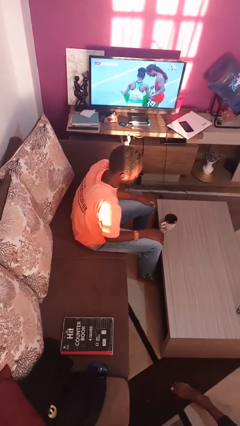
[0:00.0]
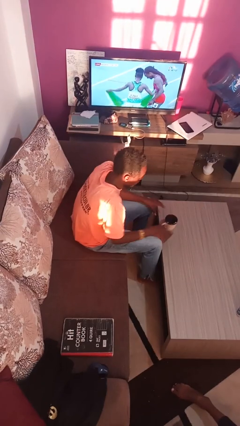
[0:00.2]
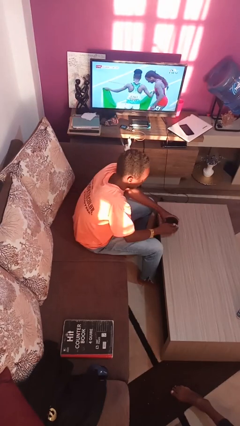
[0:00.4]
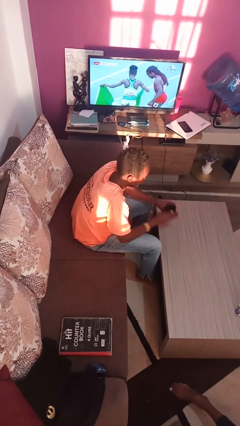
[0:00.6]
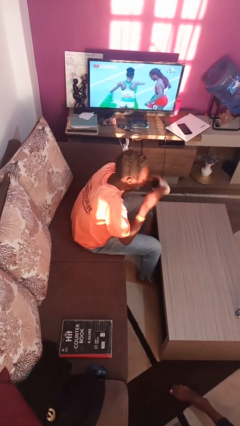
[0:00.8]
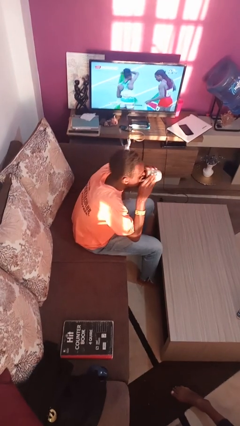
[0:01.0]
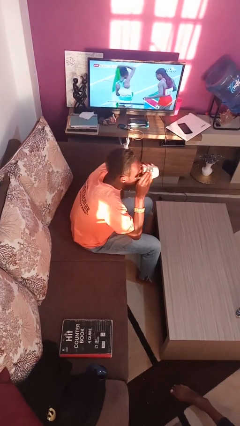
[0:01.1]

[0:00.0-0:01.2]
person drinks from mug

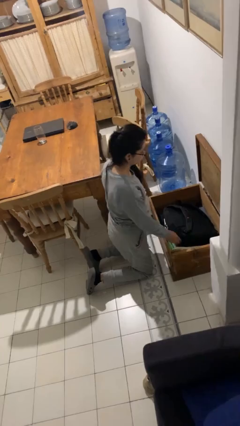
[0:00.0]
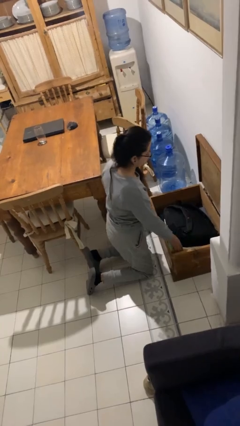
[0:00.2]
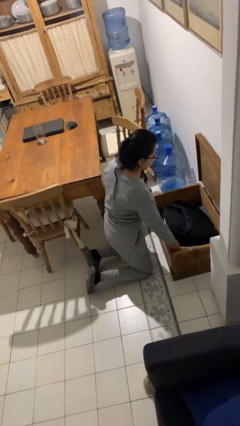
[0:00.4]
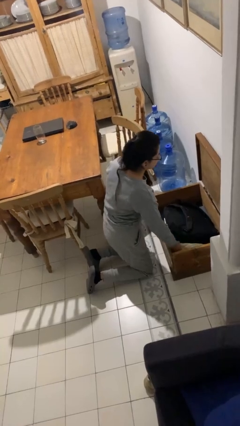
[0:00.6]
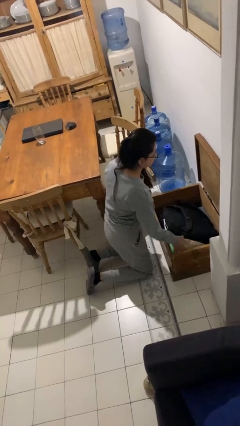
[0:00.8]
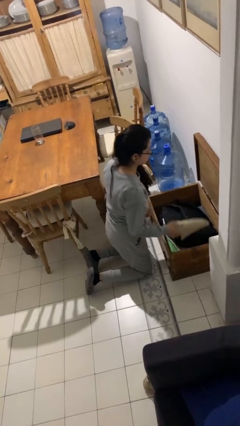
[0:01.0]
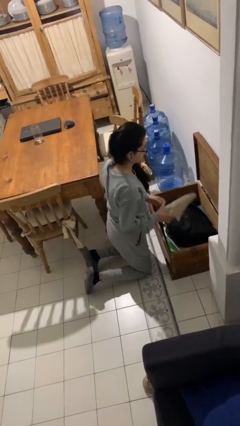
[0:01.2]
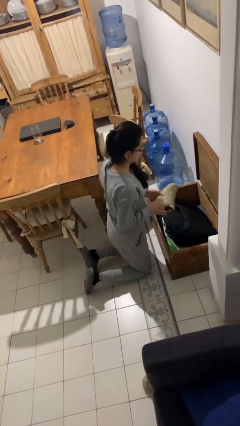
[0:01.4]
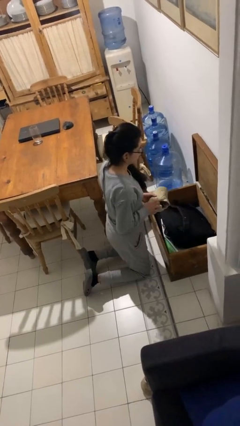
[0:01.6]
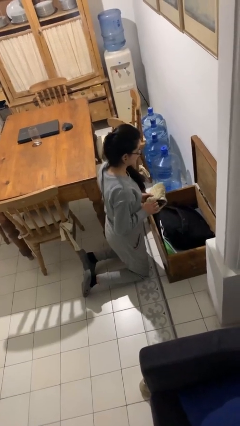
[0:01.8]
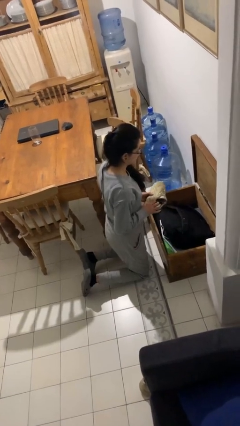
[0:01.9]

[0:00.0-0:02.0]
person takes object from box

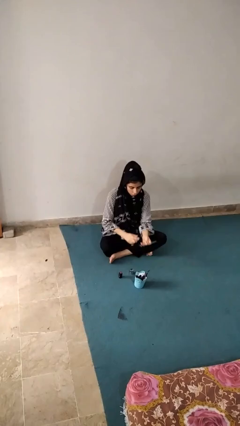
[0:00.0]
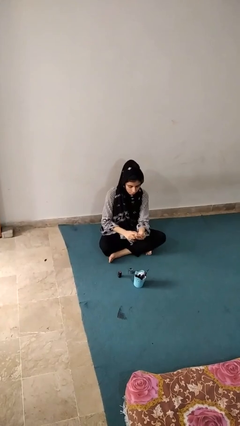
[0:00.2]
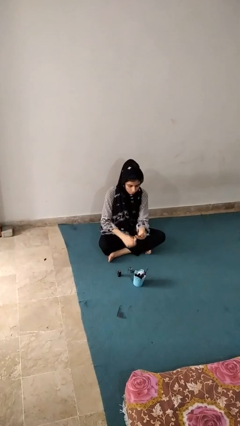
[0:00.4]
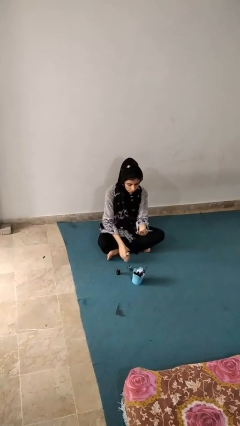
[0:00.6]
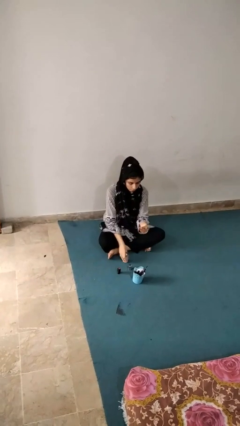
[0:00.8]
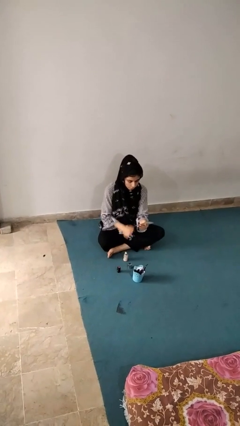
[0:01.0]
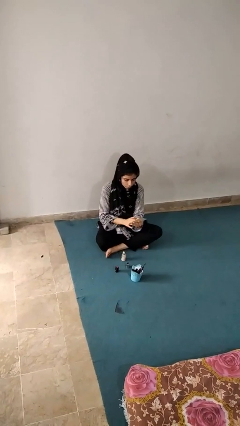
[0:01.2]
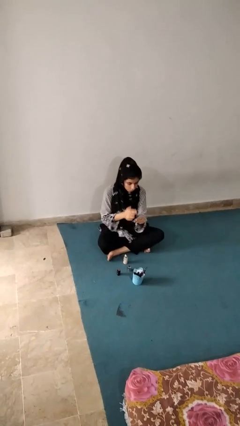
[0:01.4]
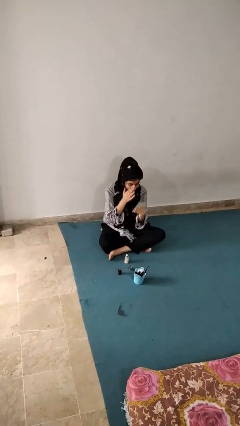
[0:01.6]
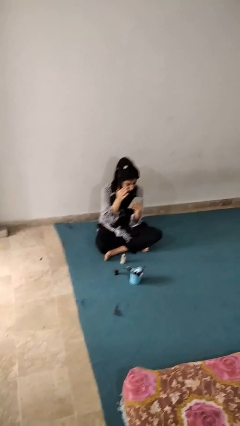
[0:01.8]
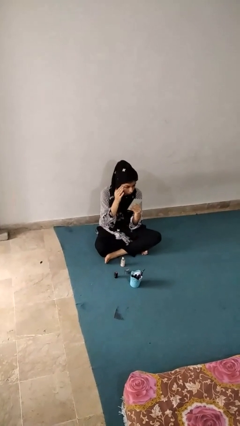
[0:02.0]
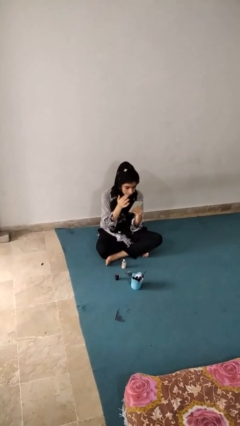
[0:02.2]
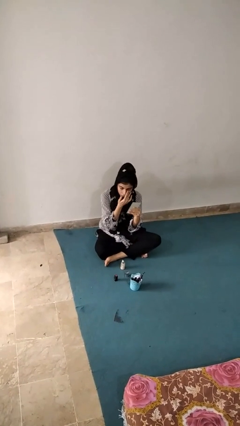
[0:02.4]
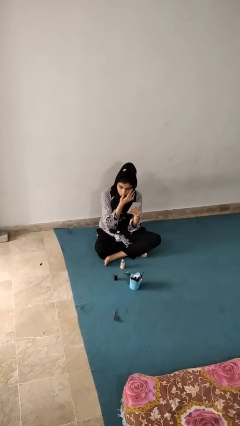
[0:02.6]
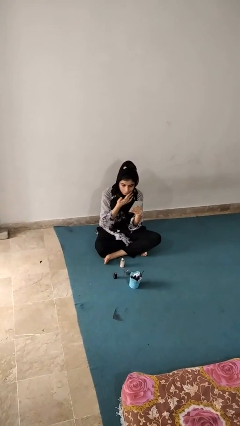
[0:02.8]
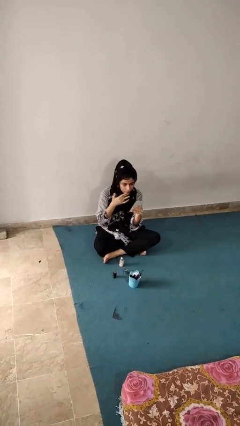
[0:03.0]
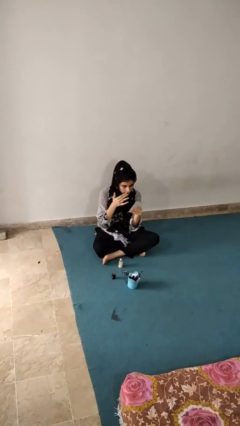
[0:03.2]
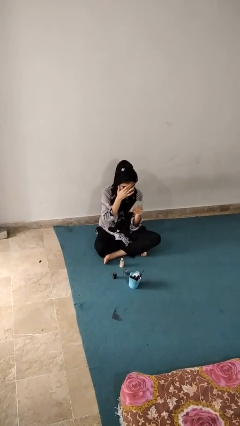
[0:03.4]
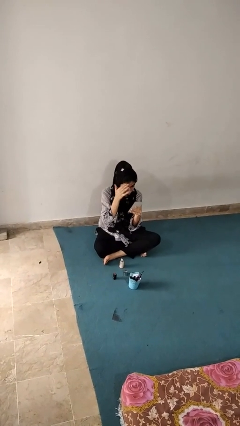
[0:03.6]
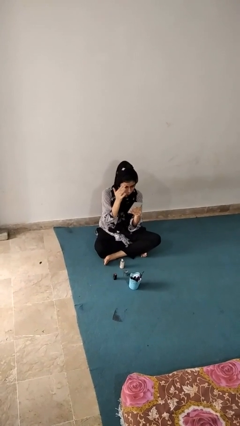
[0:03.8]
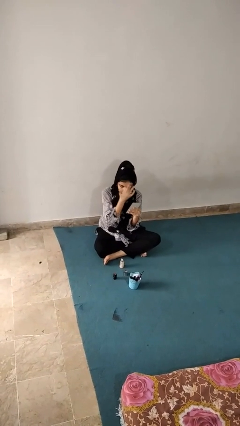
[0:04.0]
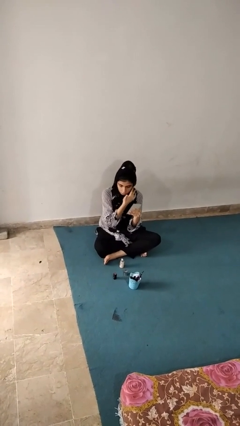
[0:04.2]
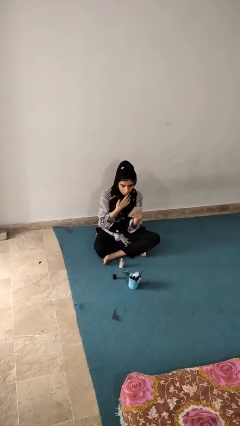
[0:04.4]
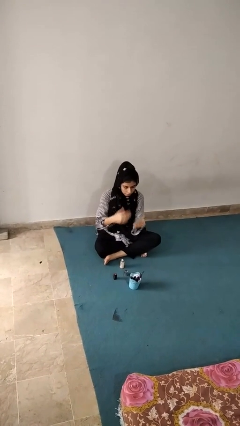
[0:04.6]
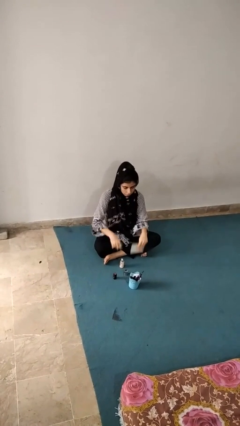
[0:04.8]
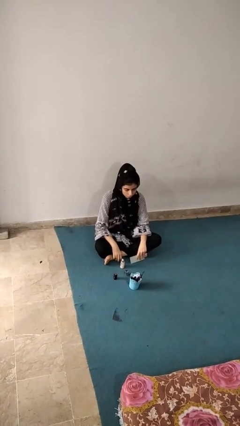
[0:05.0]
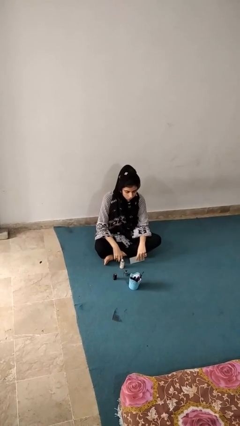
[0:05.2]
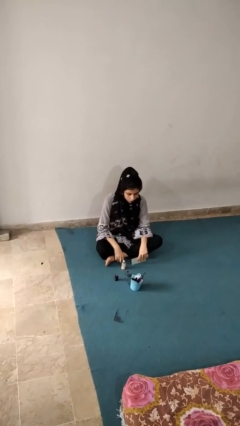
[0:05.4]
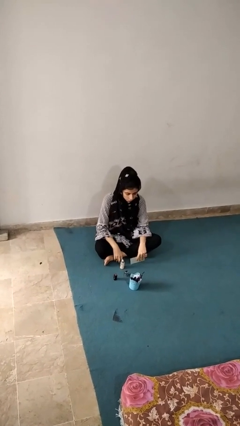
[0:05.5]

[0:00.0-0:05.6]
person applies foundation makeup

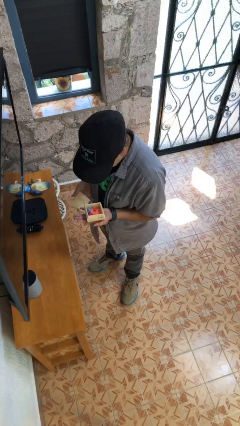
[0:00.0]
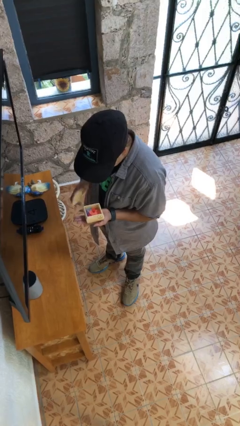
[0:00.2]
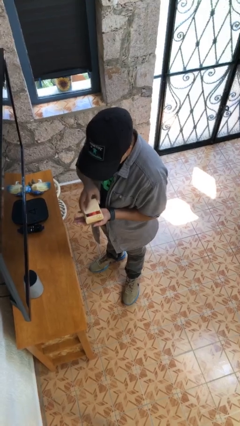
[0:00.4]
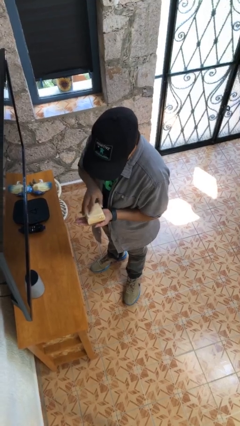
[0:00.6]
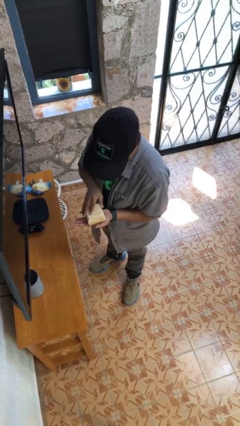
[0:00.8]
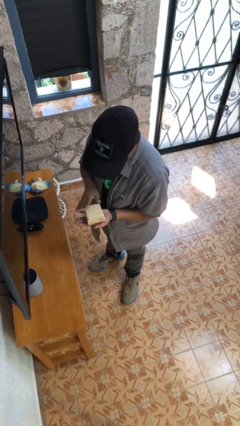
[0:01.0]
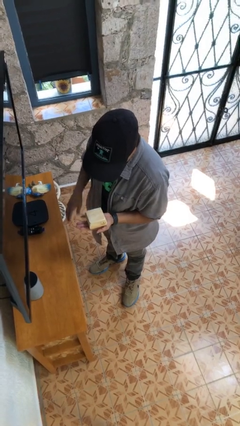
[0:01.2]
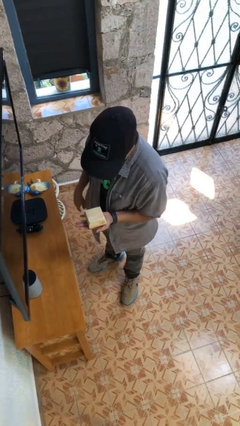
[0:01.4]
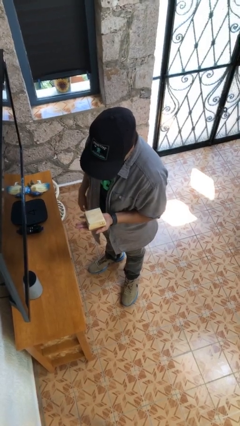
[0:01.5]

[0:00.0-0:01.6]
person closes jewelry box

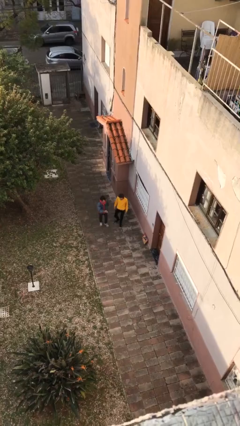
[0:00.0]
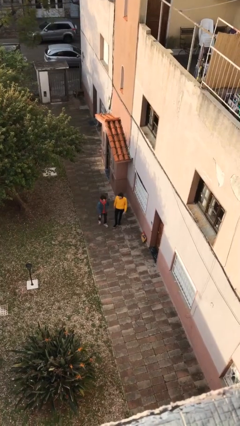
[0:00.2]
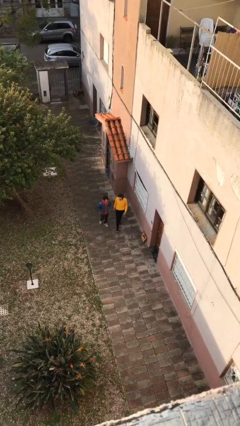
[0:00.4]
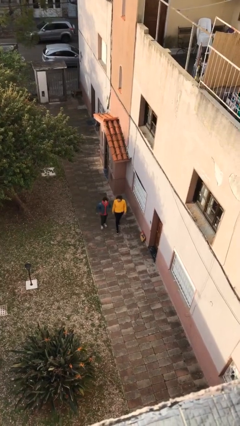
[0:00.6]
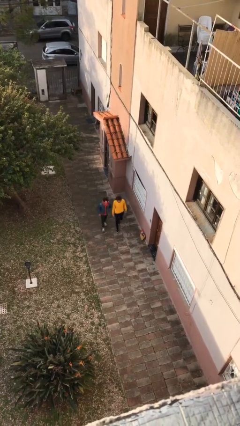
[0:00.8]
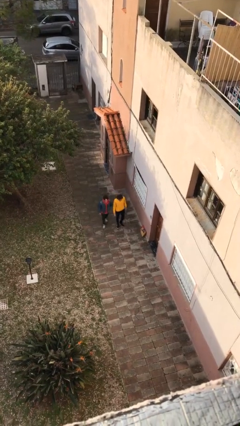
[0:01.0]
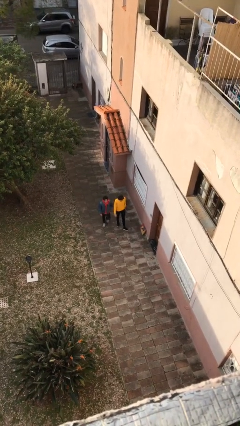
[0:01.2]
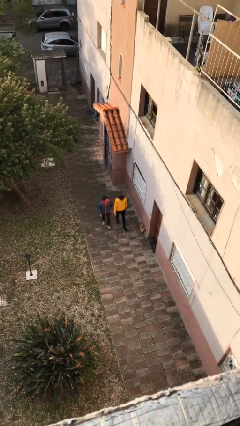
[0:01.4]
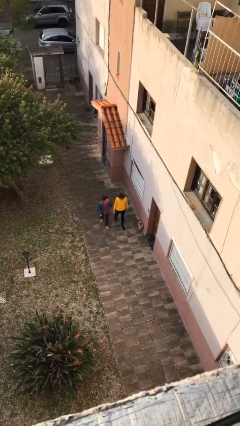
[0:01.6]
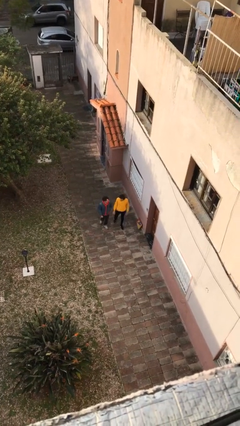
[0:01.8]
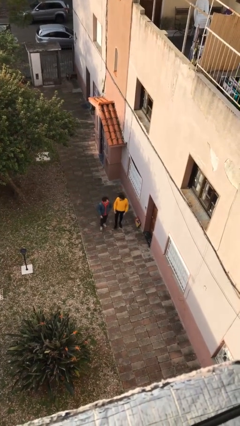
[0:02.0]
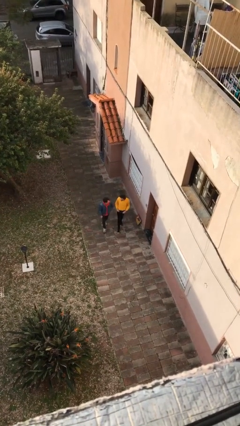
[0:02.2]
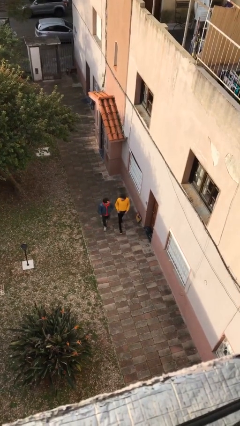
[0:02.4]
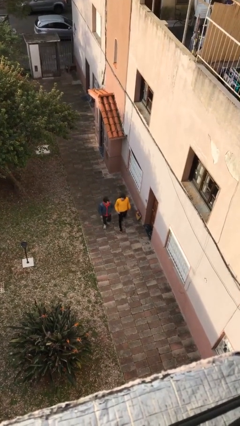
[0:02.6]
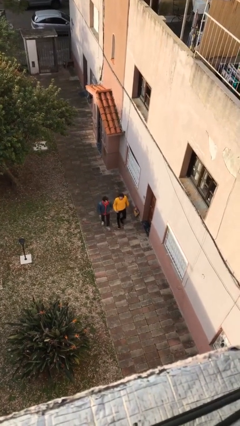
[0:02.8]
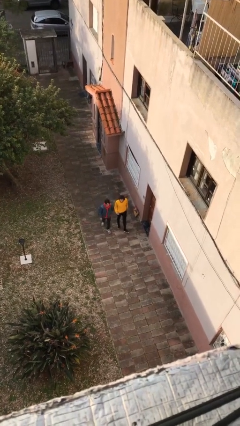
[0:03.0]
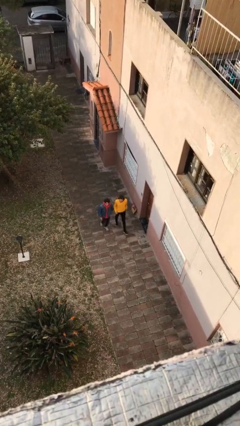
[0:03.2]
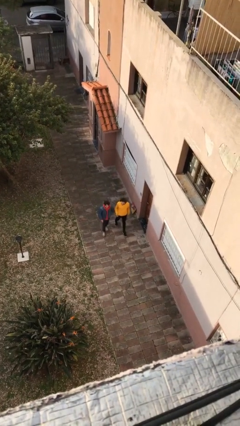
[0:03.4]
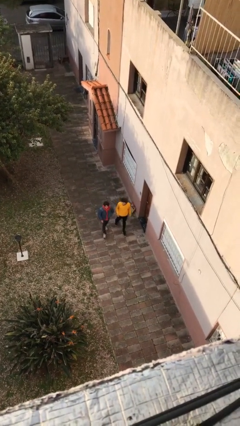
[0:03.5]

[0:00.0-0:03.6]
person talks to person

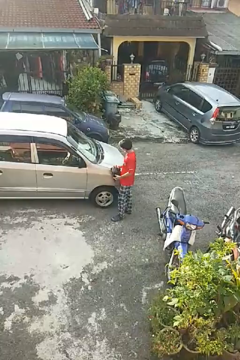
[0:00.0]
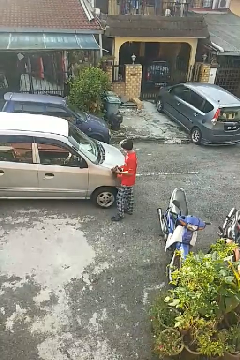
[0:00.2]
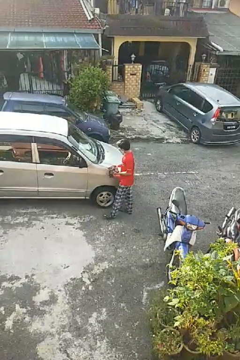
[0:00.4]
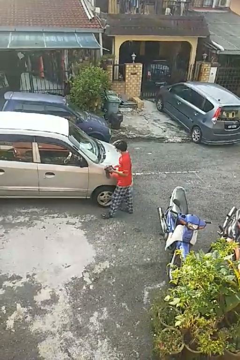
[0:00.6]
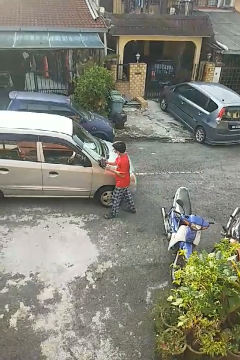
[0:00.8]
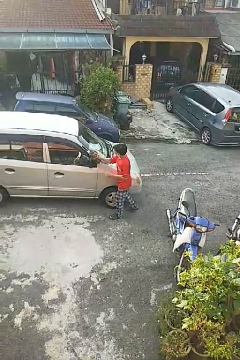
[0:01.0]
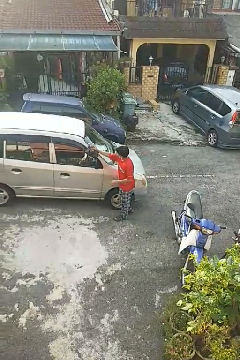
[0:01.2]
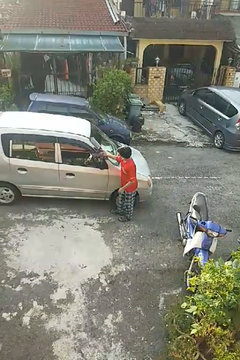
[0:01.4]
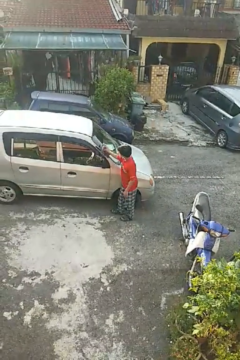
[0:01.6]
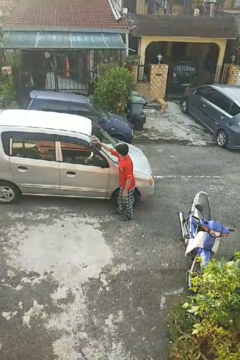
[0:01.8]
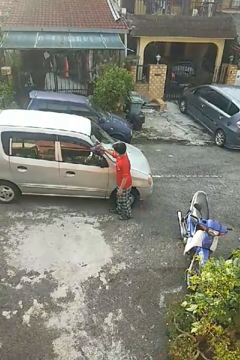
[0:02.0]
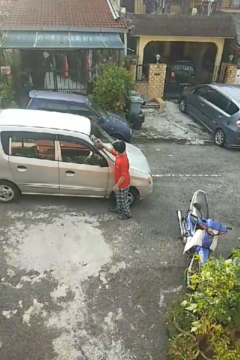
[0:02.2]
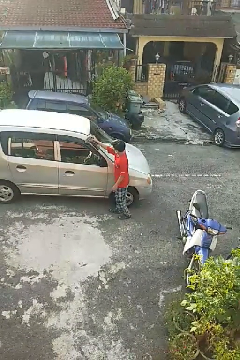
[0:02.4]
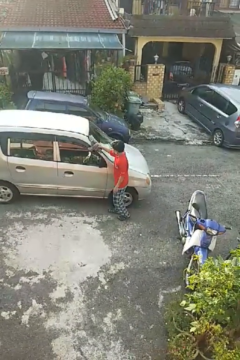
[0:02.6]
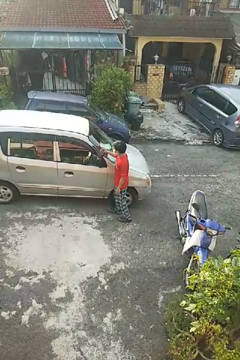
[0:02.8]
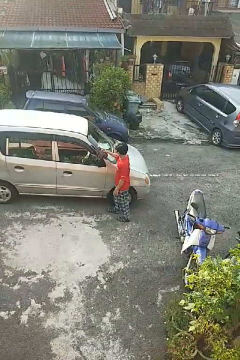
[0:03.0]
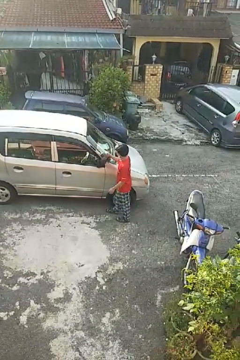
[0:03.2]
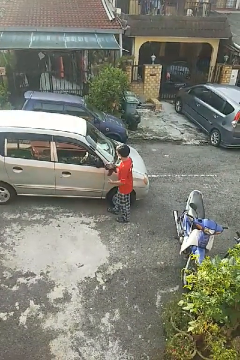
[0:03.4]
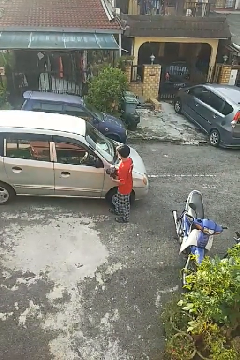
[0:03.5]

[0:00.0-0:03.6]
person polishes car with rag
